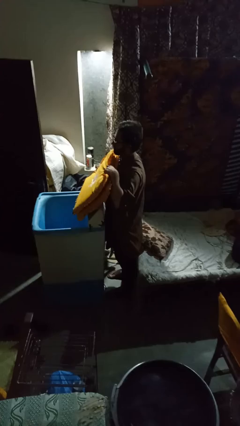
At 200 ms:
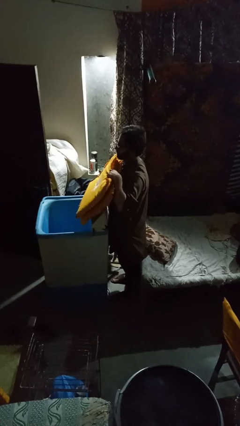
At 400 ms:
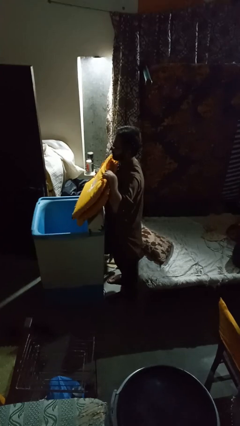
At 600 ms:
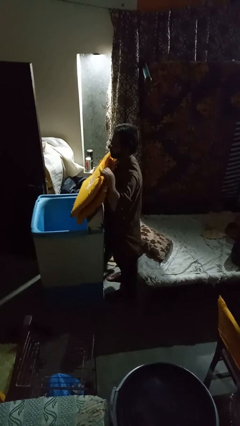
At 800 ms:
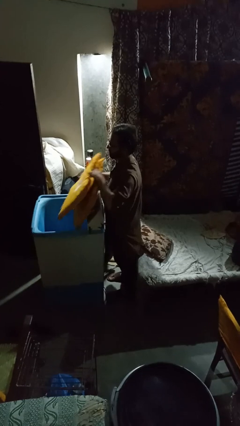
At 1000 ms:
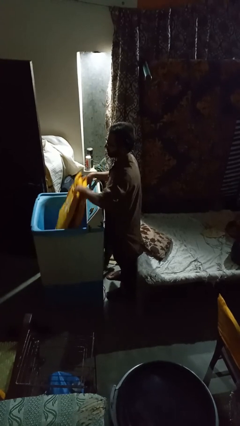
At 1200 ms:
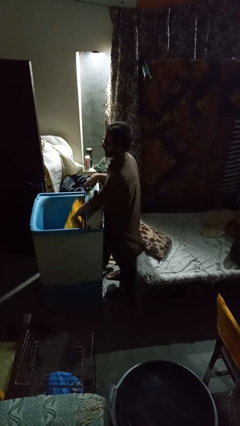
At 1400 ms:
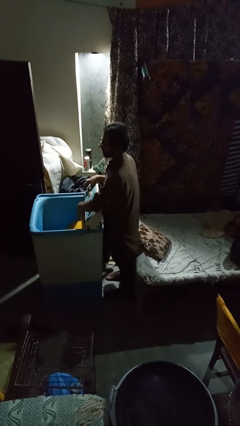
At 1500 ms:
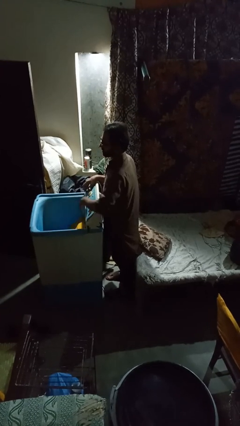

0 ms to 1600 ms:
person loads clotheswasher

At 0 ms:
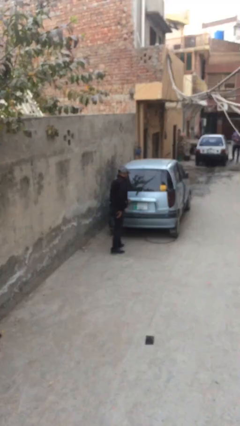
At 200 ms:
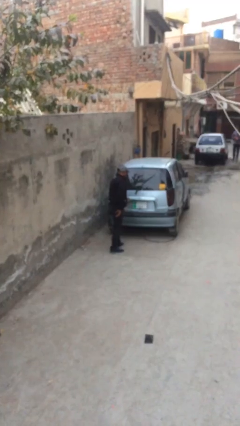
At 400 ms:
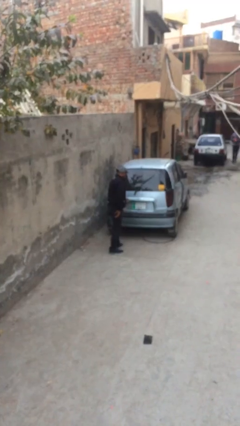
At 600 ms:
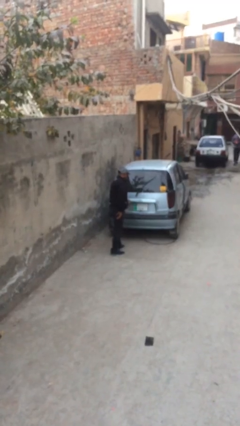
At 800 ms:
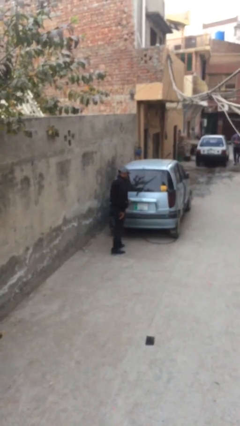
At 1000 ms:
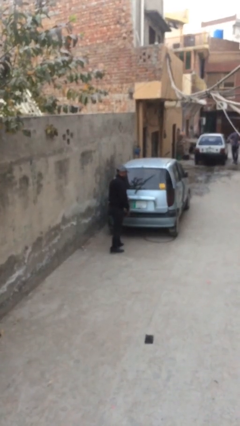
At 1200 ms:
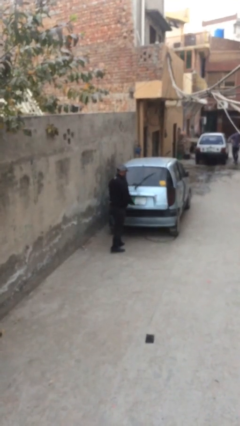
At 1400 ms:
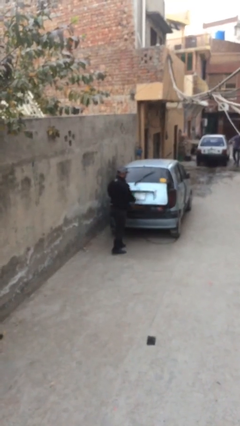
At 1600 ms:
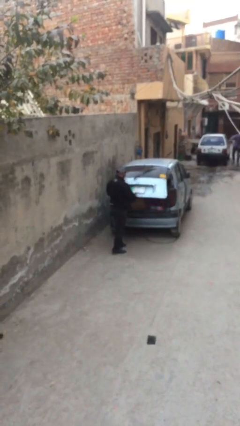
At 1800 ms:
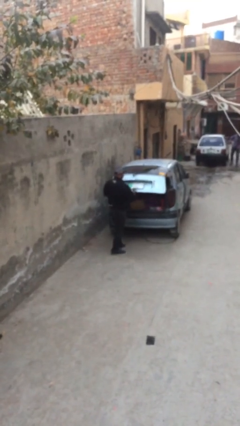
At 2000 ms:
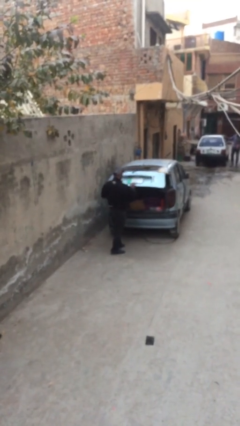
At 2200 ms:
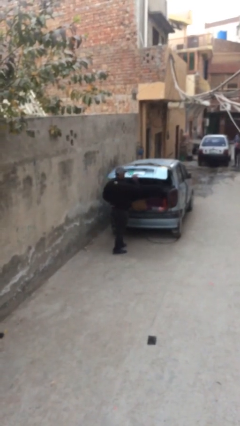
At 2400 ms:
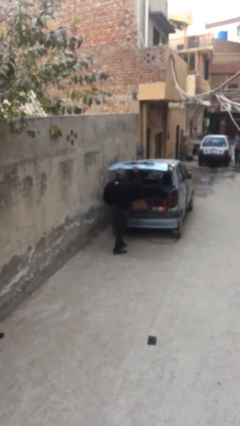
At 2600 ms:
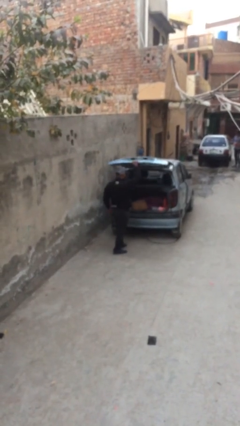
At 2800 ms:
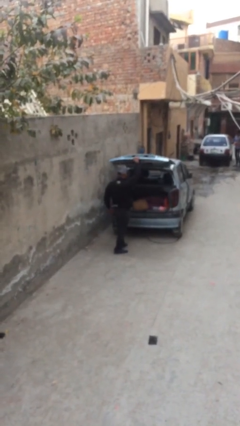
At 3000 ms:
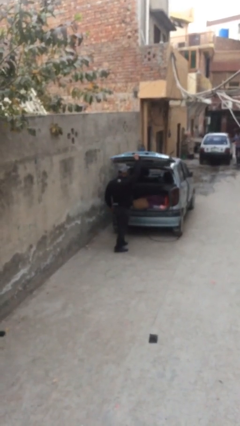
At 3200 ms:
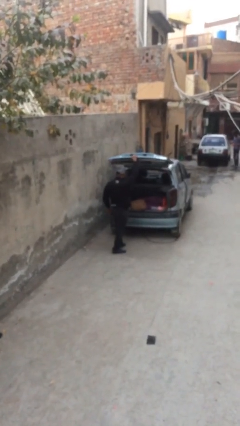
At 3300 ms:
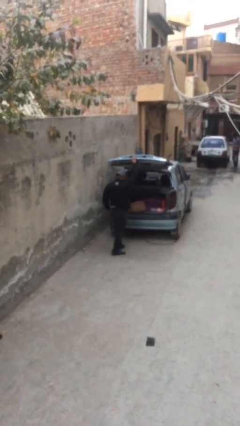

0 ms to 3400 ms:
person opens car trunk

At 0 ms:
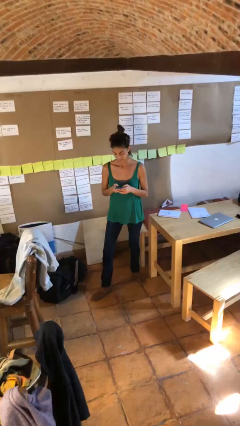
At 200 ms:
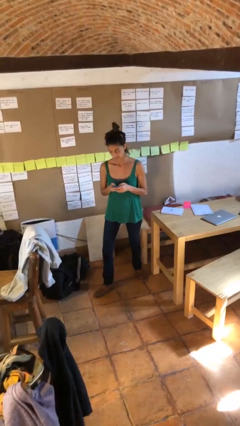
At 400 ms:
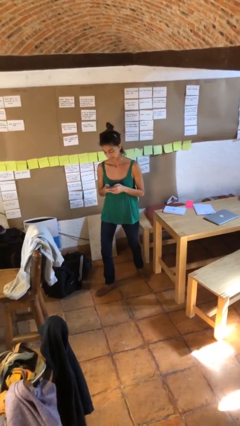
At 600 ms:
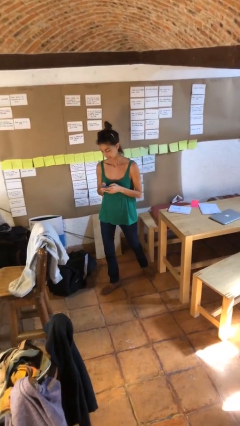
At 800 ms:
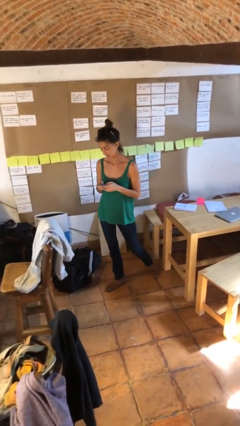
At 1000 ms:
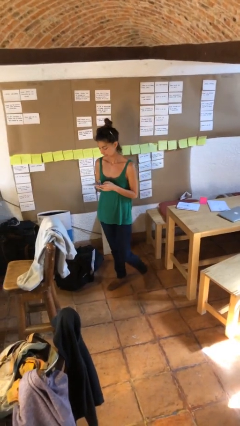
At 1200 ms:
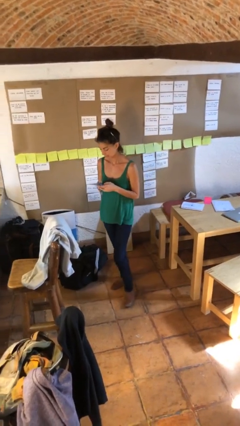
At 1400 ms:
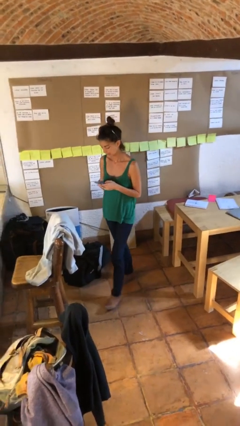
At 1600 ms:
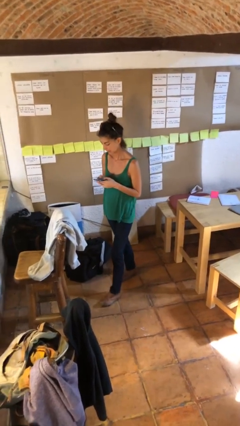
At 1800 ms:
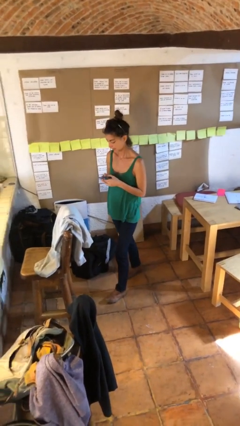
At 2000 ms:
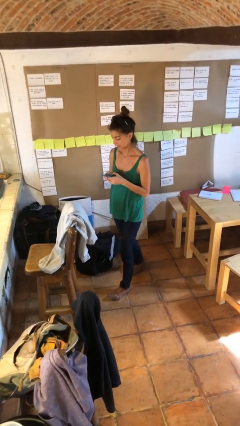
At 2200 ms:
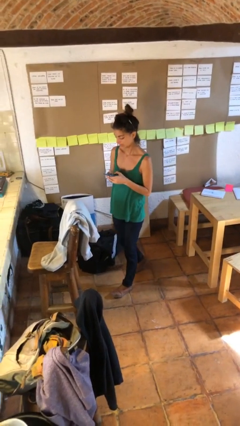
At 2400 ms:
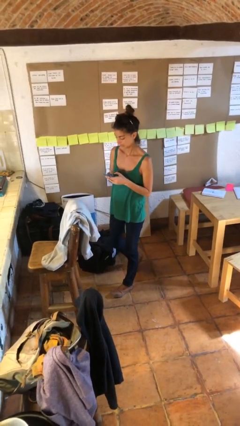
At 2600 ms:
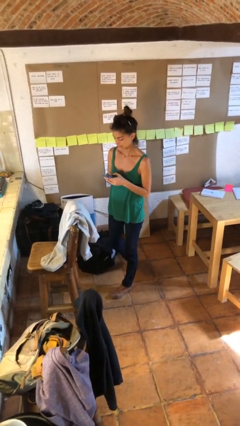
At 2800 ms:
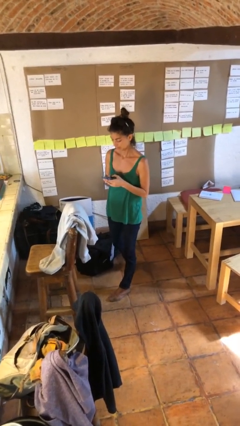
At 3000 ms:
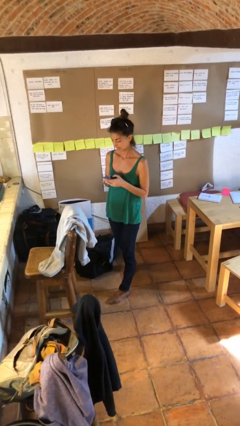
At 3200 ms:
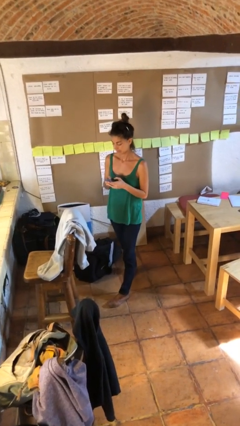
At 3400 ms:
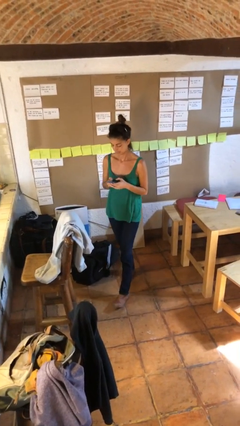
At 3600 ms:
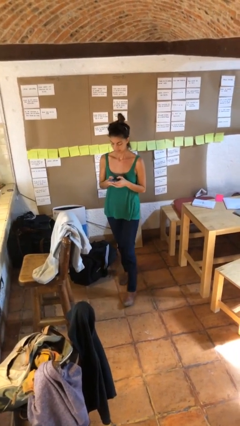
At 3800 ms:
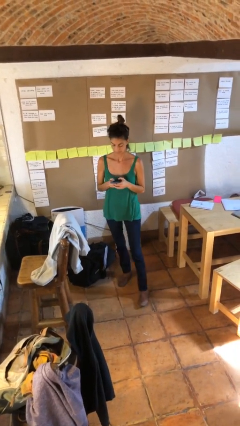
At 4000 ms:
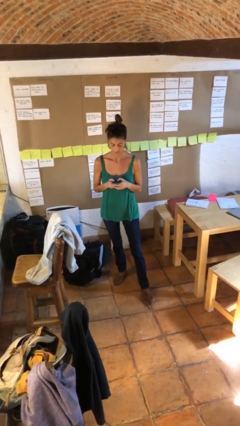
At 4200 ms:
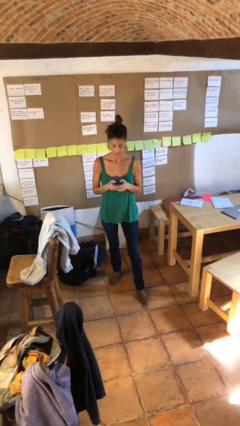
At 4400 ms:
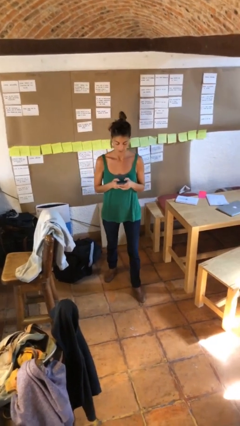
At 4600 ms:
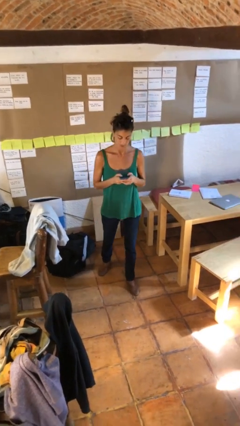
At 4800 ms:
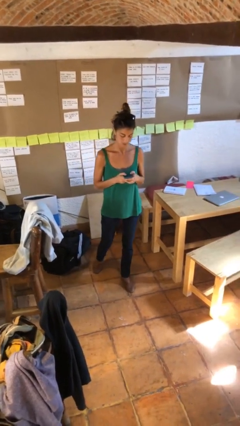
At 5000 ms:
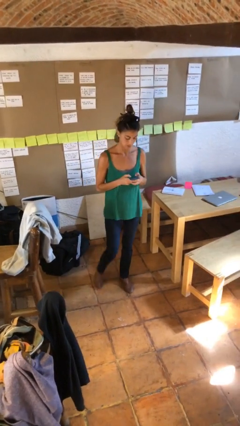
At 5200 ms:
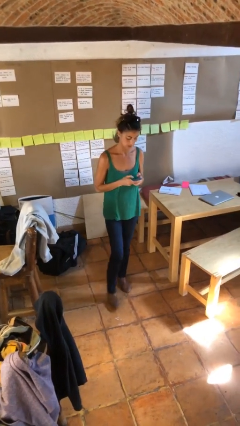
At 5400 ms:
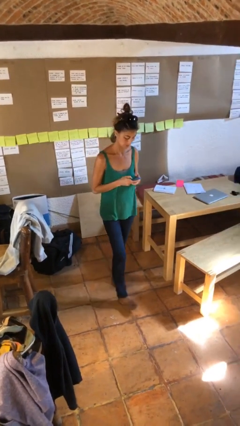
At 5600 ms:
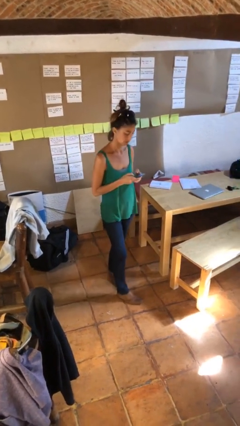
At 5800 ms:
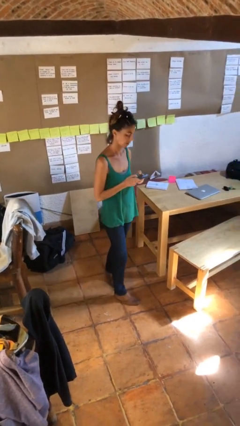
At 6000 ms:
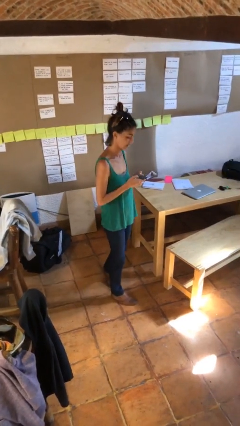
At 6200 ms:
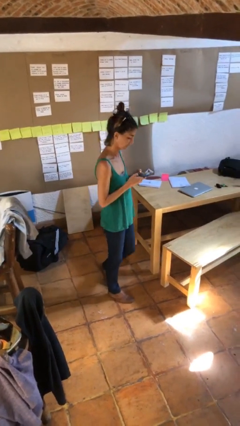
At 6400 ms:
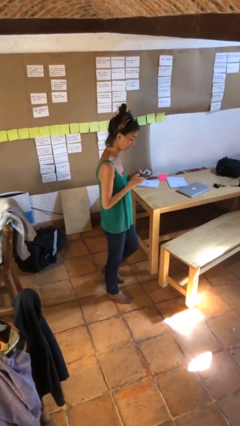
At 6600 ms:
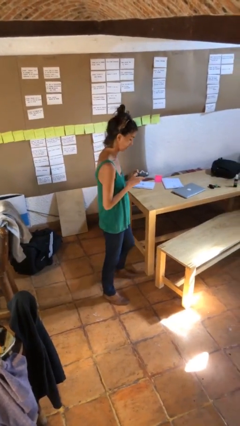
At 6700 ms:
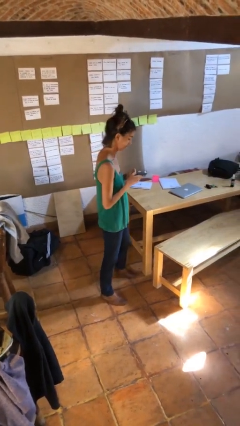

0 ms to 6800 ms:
person texts on phone

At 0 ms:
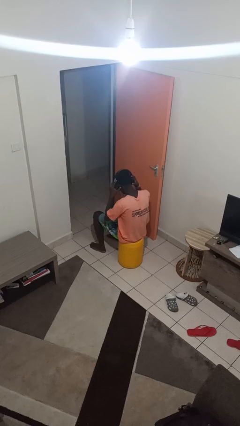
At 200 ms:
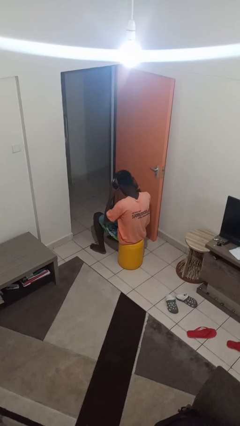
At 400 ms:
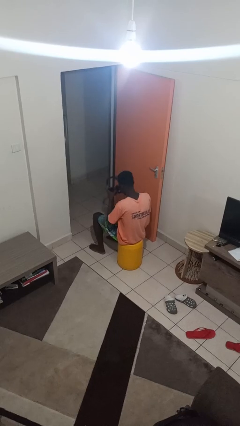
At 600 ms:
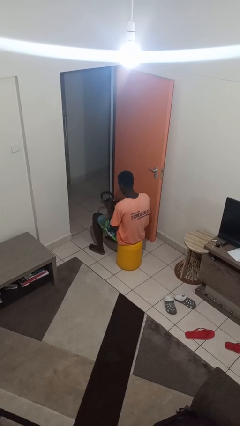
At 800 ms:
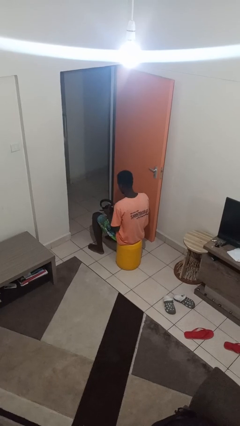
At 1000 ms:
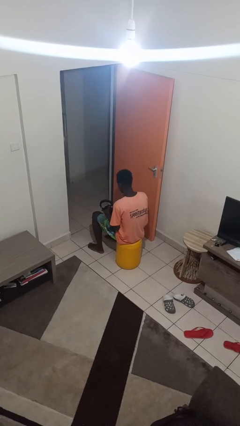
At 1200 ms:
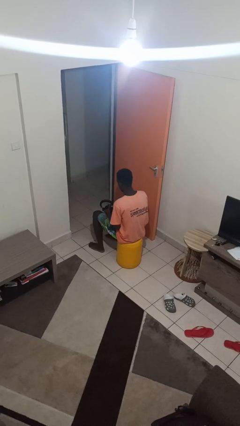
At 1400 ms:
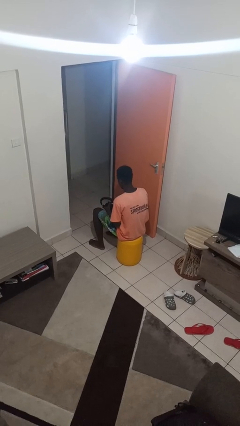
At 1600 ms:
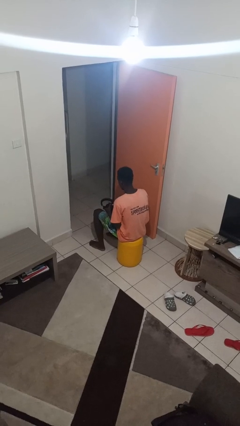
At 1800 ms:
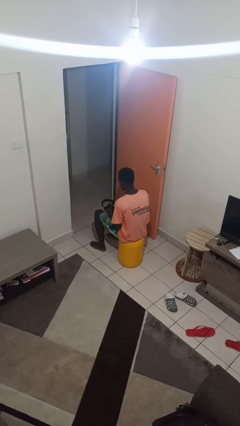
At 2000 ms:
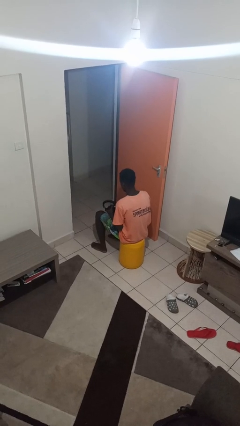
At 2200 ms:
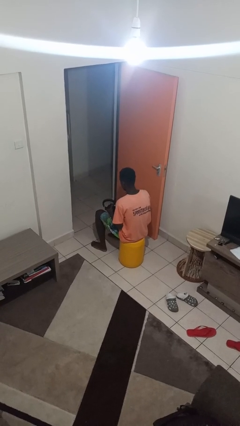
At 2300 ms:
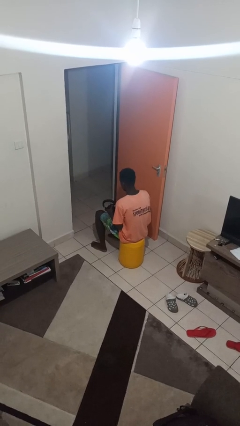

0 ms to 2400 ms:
person takes off headphones

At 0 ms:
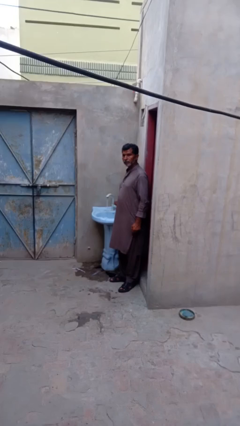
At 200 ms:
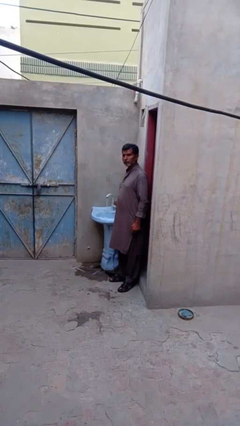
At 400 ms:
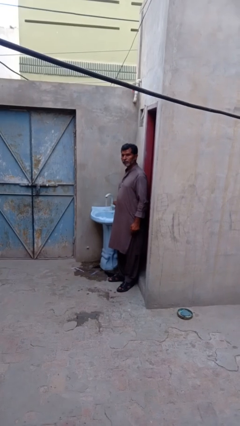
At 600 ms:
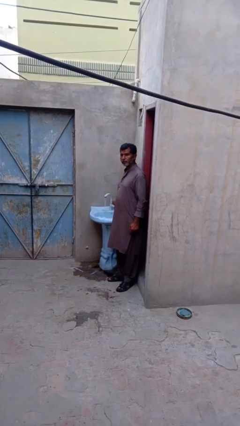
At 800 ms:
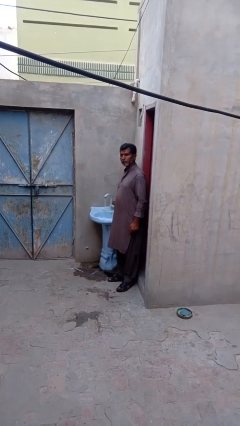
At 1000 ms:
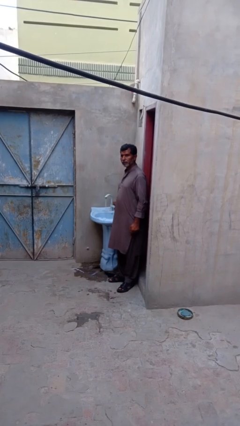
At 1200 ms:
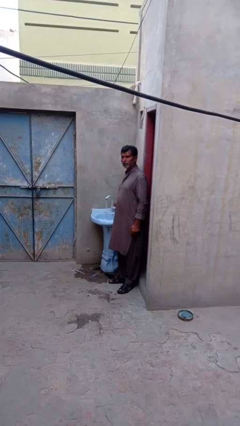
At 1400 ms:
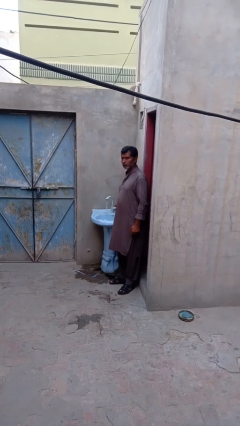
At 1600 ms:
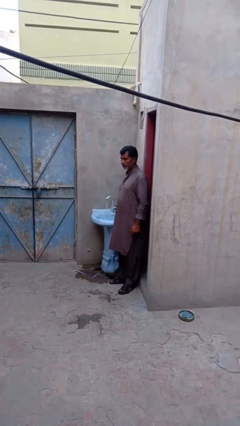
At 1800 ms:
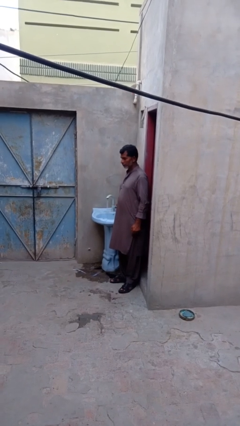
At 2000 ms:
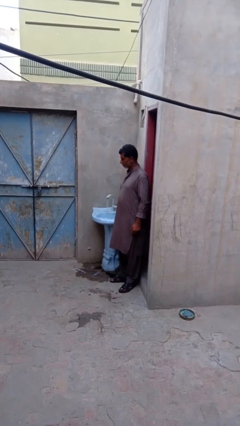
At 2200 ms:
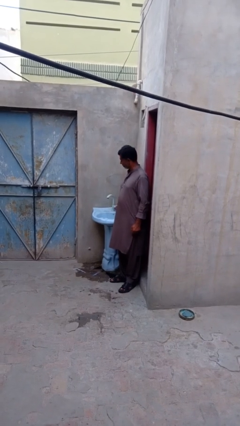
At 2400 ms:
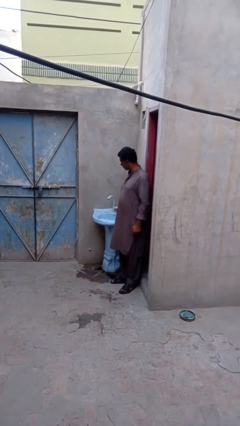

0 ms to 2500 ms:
person turns on faucet

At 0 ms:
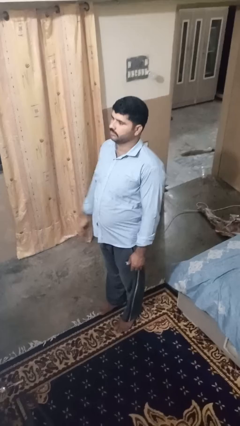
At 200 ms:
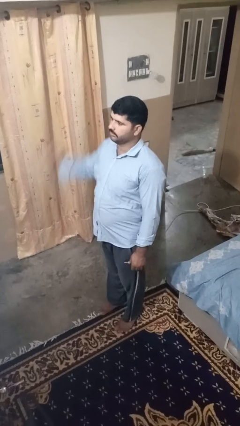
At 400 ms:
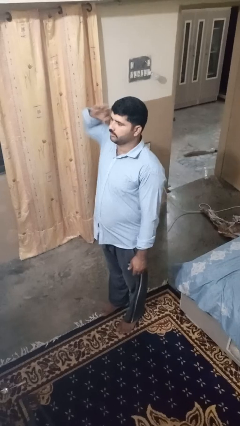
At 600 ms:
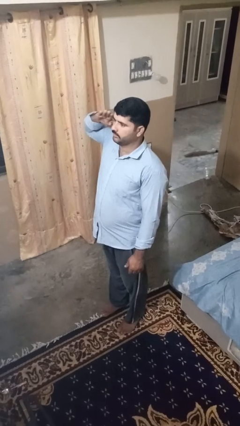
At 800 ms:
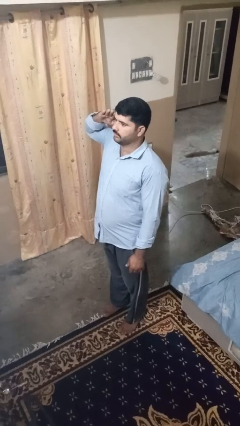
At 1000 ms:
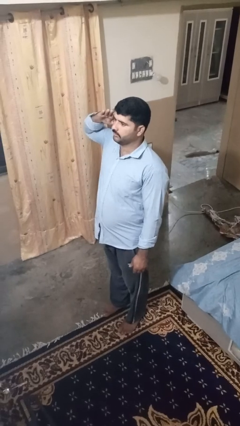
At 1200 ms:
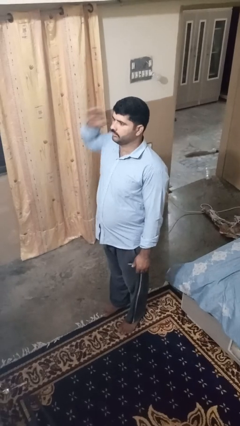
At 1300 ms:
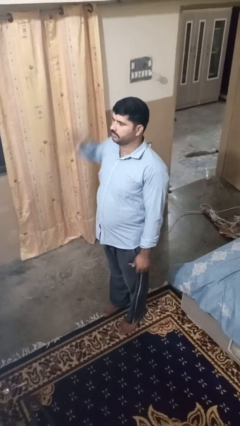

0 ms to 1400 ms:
person salutes
